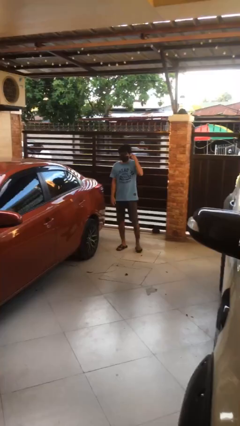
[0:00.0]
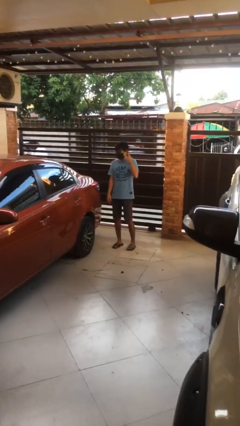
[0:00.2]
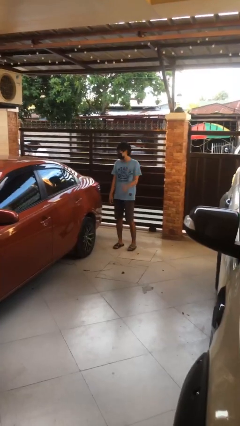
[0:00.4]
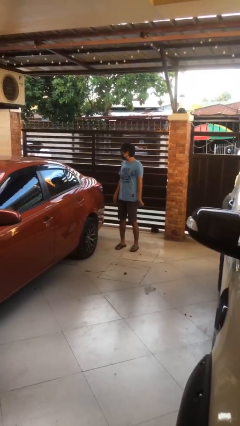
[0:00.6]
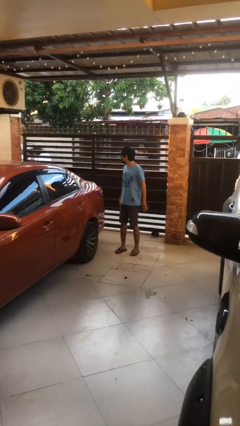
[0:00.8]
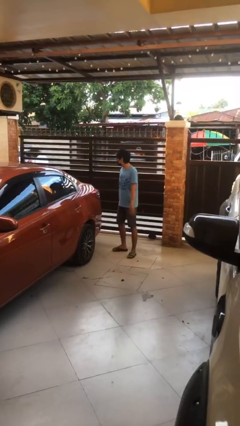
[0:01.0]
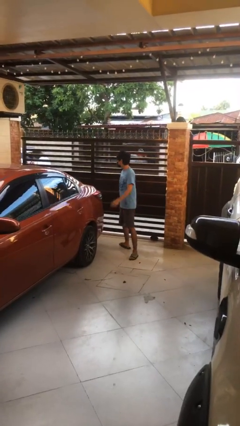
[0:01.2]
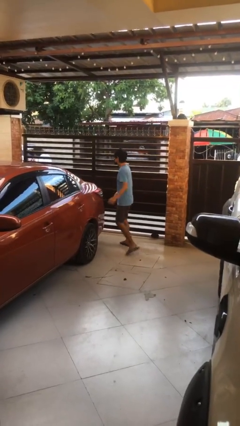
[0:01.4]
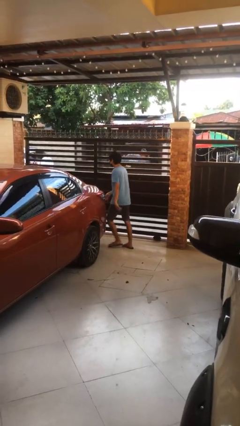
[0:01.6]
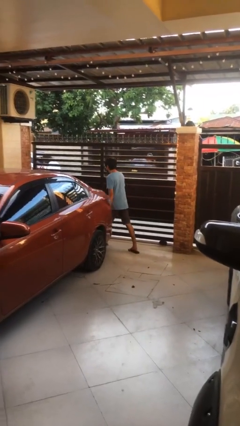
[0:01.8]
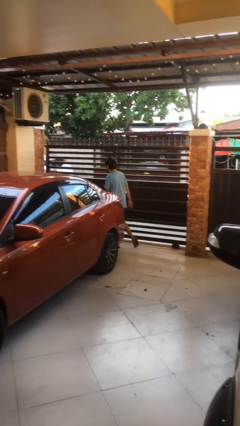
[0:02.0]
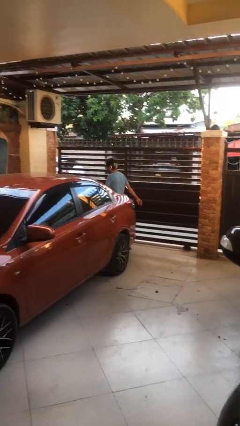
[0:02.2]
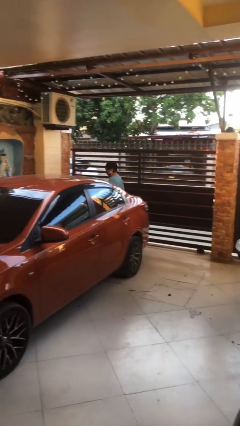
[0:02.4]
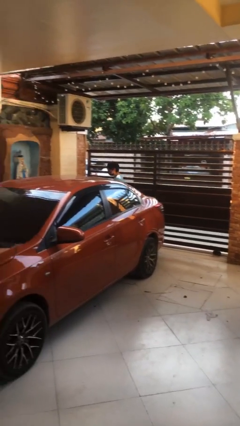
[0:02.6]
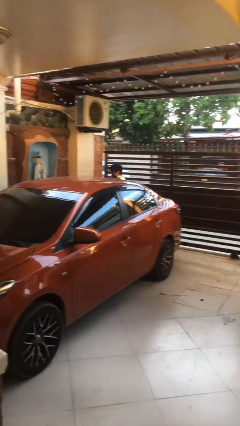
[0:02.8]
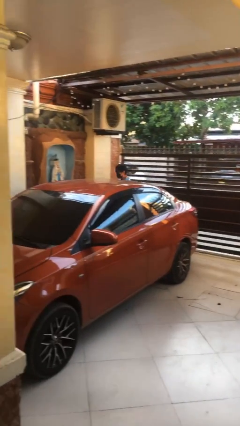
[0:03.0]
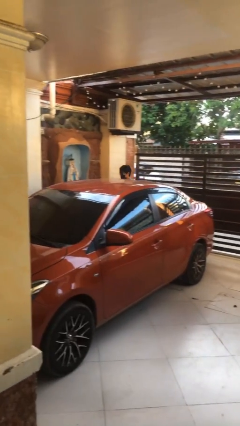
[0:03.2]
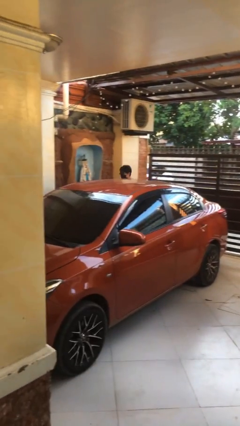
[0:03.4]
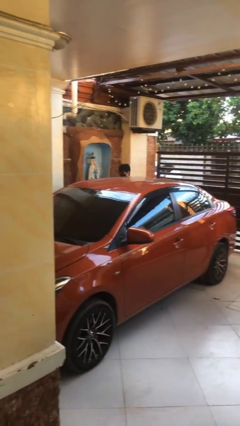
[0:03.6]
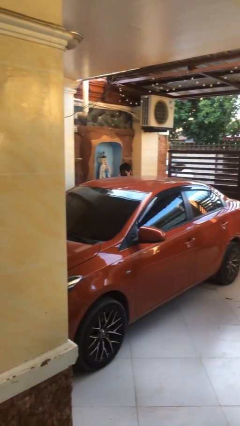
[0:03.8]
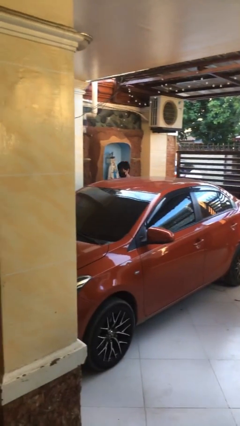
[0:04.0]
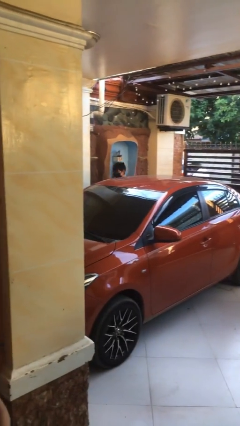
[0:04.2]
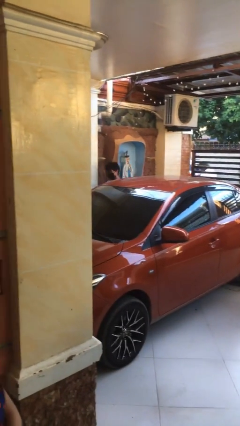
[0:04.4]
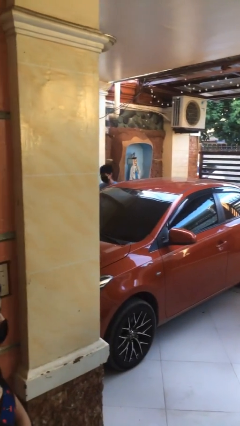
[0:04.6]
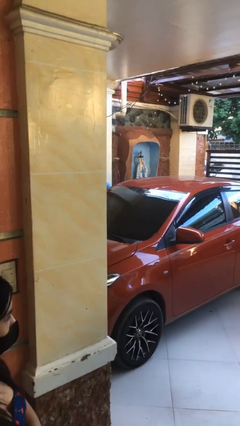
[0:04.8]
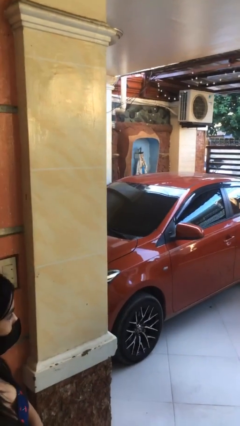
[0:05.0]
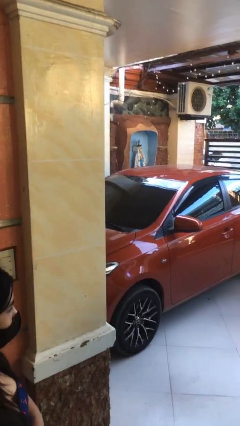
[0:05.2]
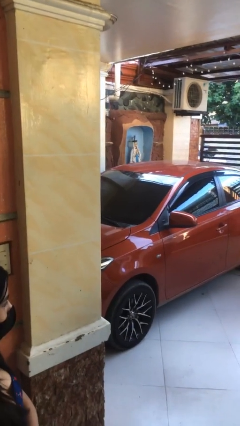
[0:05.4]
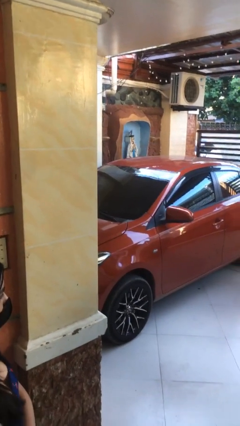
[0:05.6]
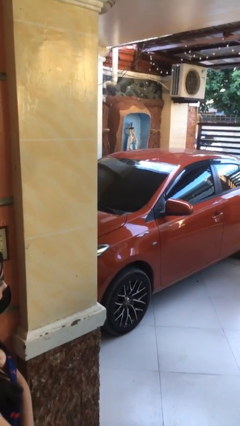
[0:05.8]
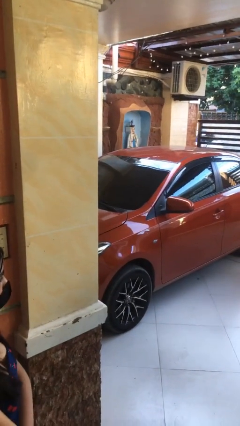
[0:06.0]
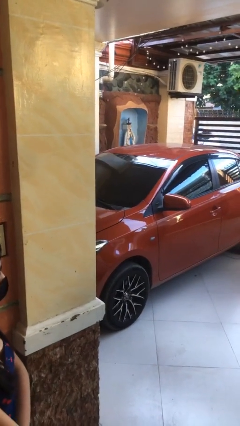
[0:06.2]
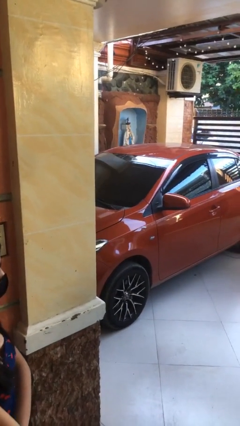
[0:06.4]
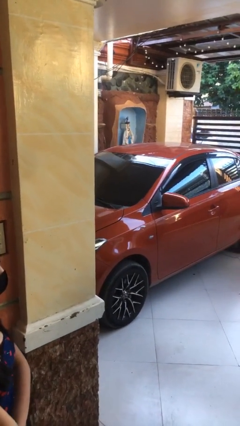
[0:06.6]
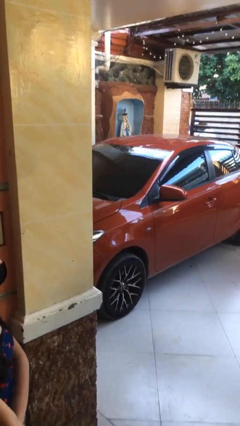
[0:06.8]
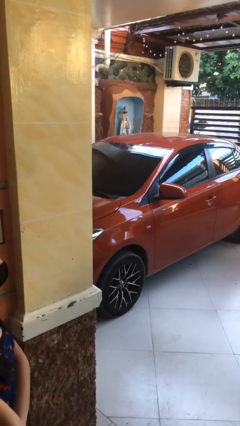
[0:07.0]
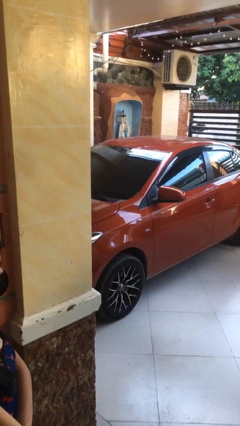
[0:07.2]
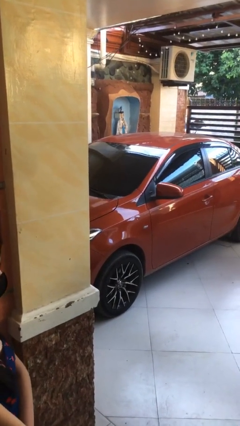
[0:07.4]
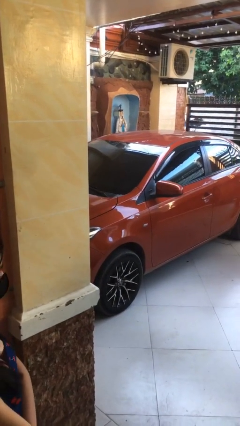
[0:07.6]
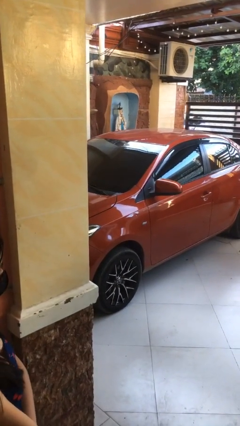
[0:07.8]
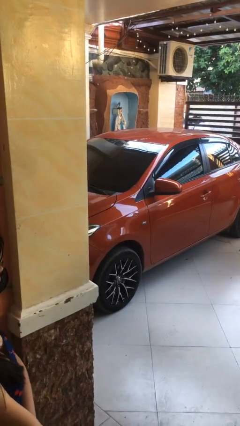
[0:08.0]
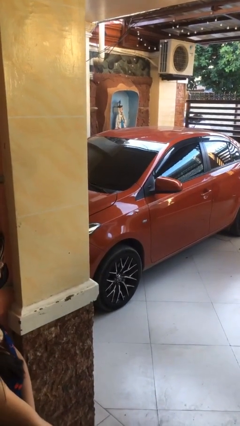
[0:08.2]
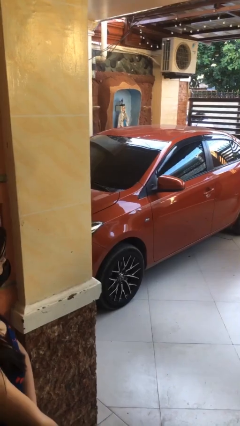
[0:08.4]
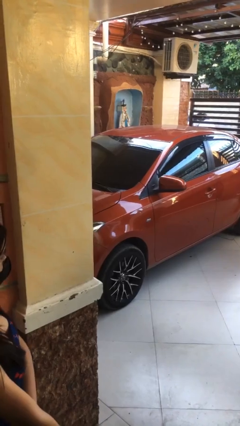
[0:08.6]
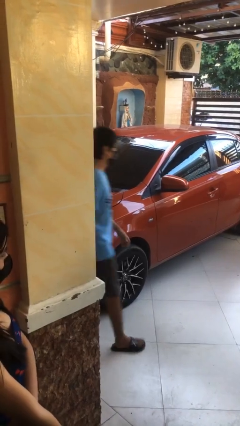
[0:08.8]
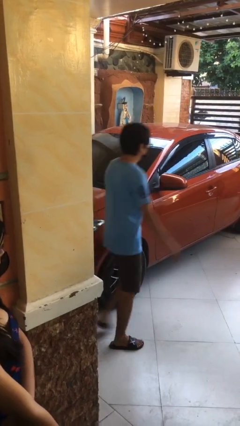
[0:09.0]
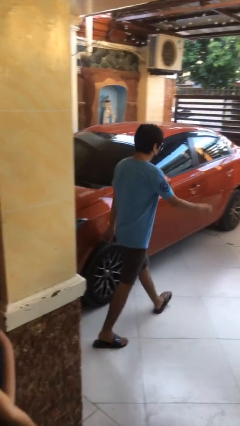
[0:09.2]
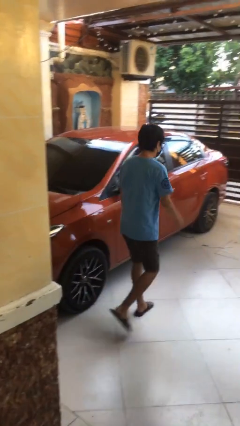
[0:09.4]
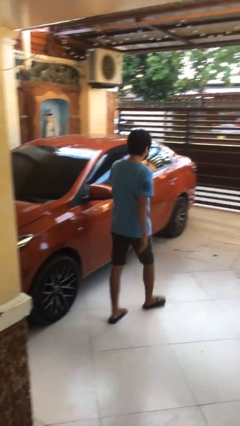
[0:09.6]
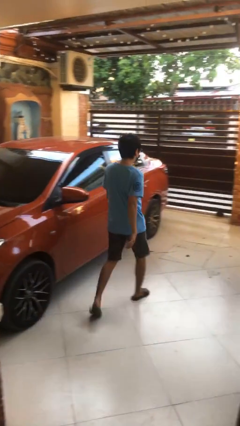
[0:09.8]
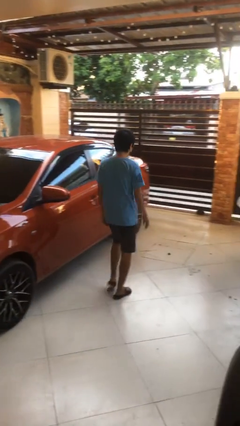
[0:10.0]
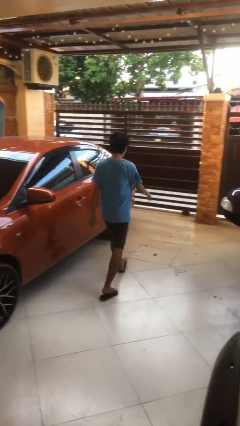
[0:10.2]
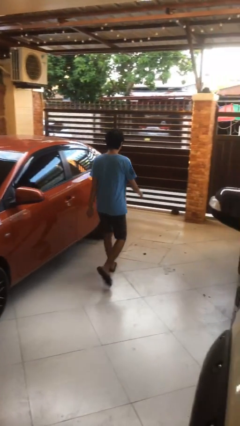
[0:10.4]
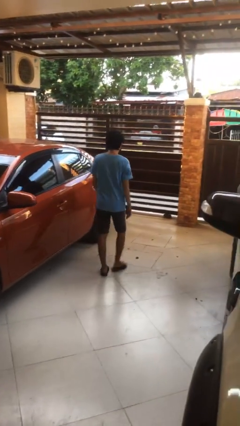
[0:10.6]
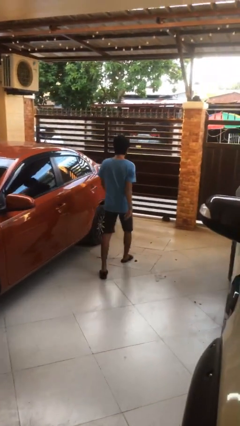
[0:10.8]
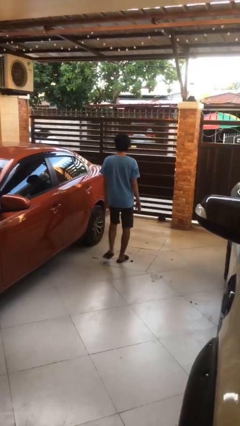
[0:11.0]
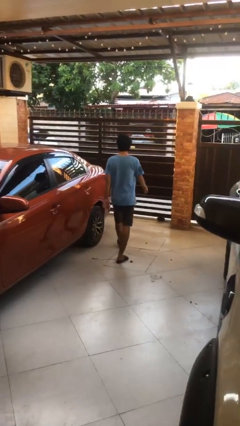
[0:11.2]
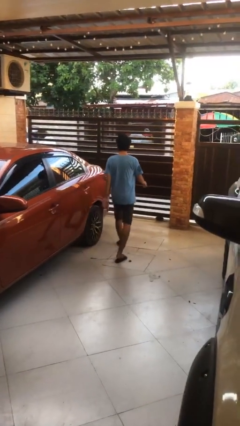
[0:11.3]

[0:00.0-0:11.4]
person walks around car

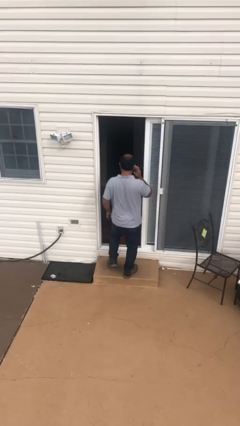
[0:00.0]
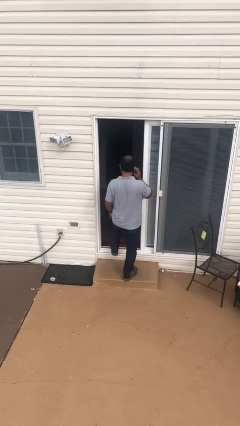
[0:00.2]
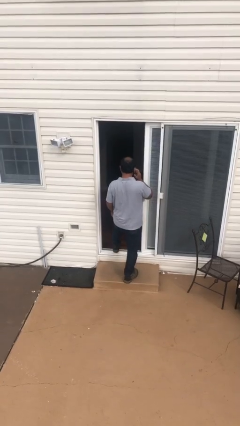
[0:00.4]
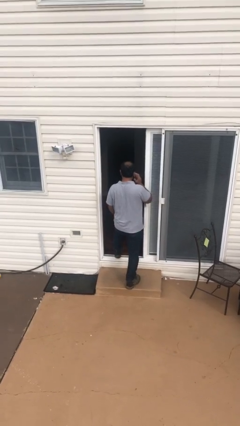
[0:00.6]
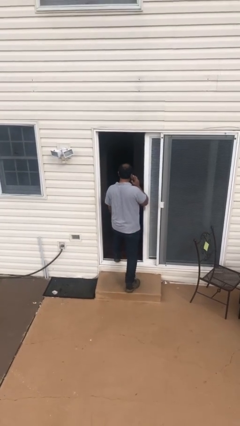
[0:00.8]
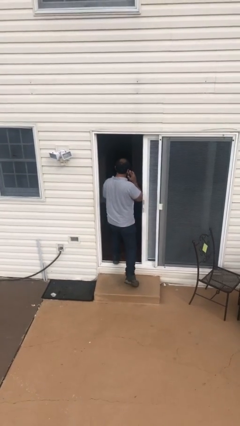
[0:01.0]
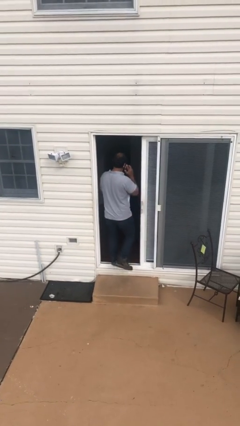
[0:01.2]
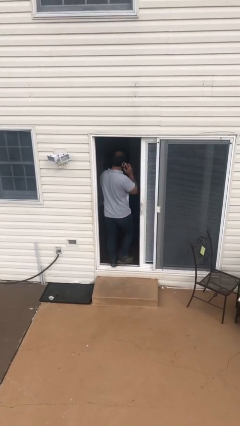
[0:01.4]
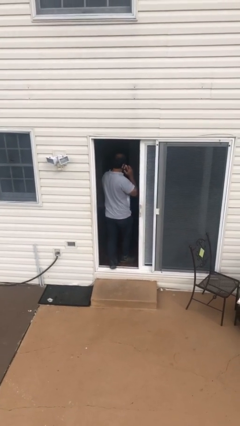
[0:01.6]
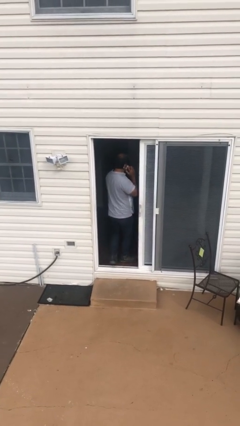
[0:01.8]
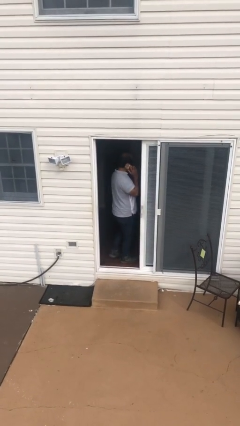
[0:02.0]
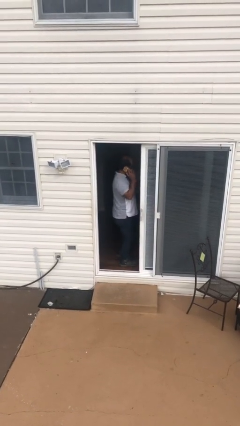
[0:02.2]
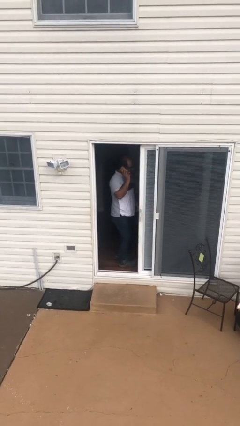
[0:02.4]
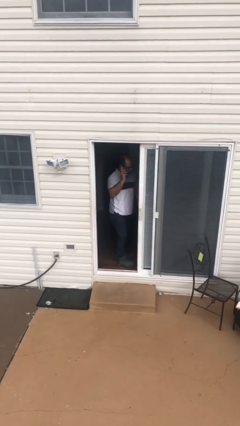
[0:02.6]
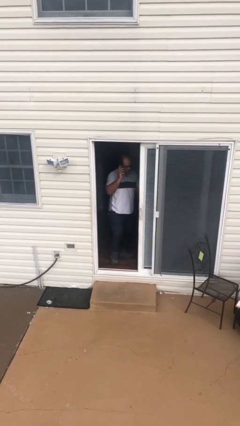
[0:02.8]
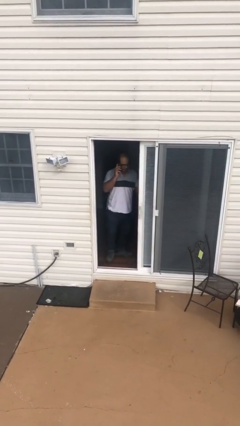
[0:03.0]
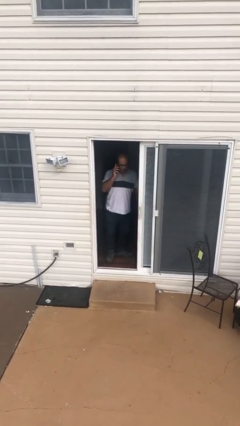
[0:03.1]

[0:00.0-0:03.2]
person exits scene through structure

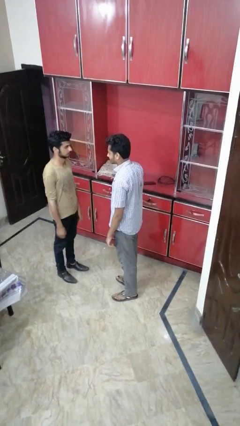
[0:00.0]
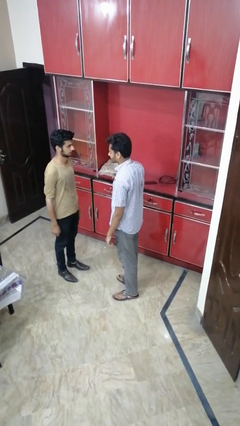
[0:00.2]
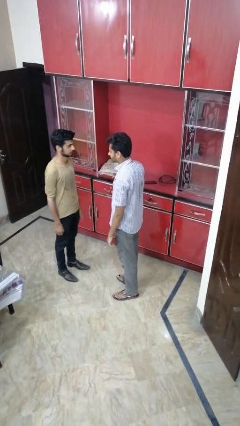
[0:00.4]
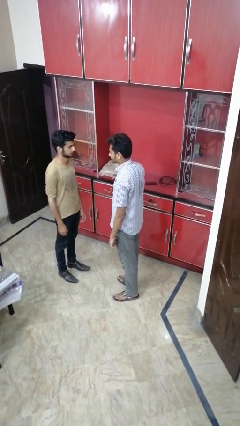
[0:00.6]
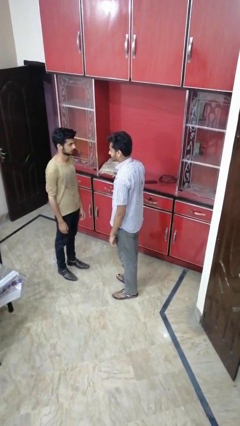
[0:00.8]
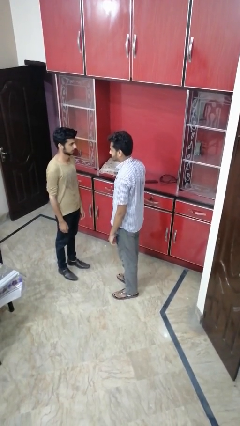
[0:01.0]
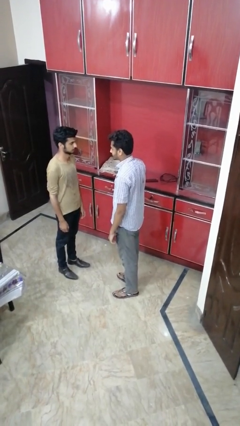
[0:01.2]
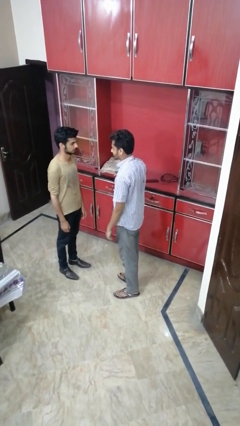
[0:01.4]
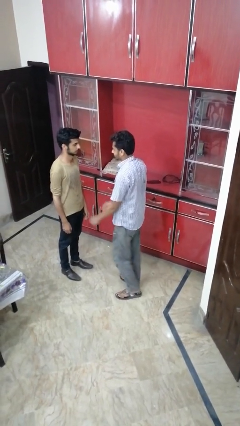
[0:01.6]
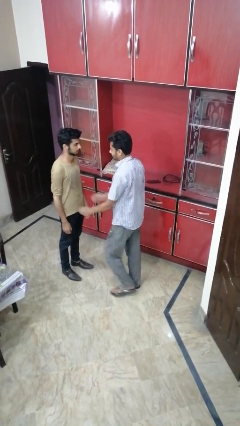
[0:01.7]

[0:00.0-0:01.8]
person laughs with person

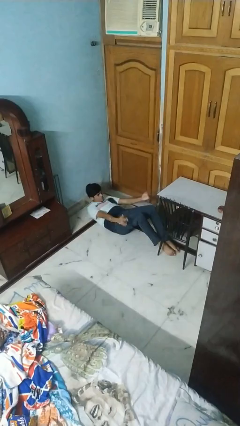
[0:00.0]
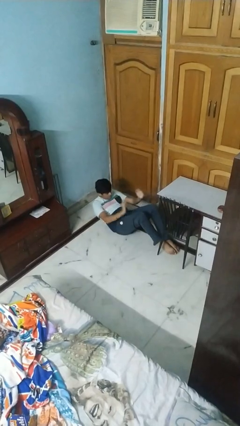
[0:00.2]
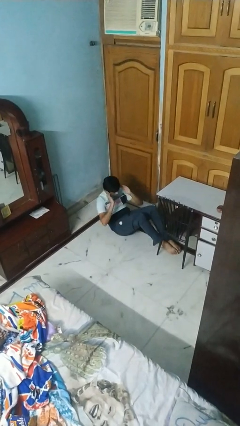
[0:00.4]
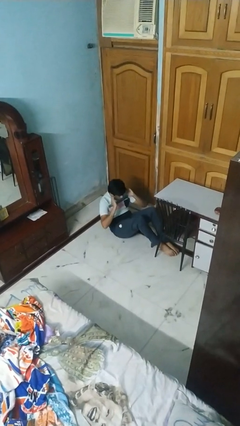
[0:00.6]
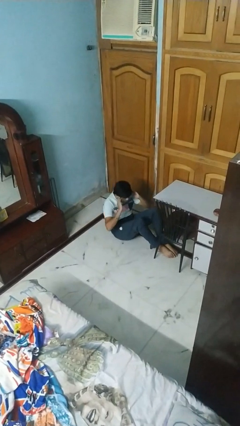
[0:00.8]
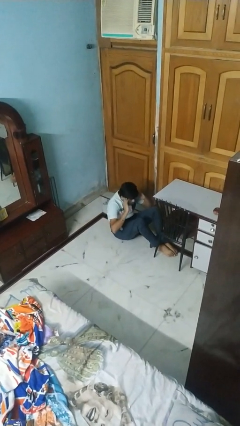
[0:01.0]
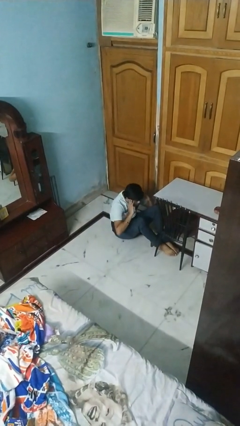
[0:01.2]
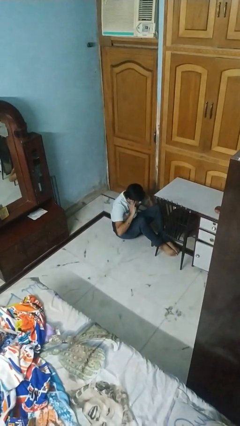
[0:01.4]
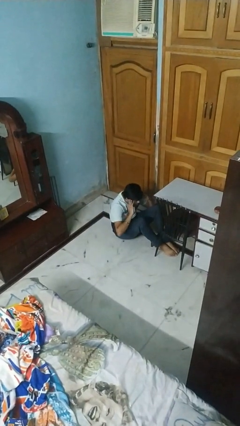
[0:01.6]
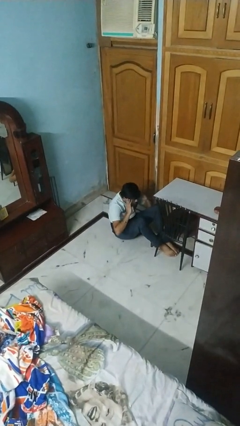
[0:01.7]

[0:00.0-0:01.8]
person exercises with situp
